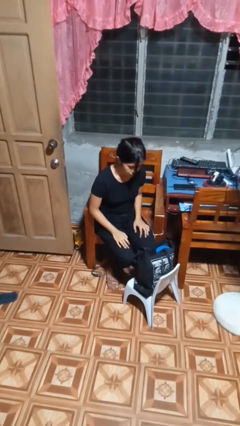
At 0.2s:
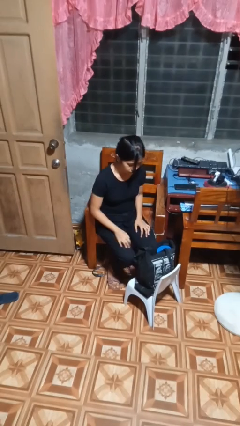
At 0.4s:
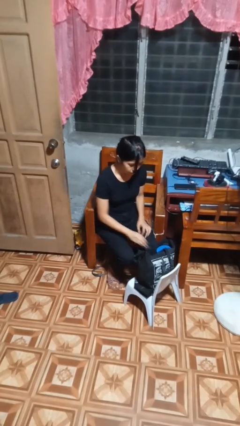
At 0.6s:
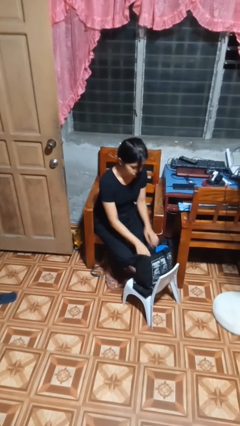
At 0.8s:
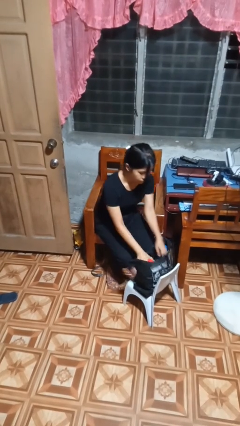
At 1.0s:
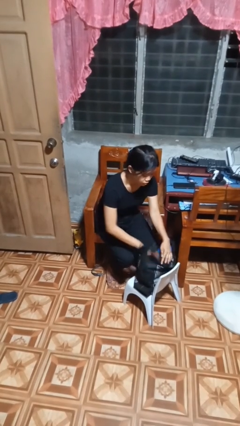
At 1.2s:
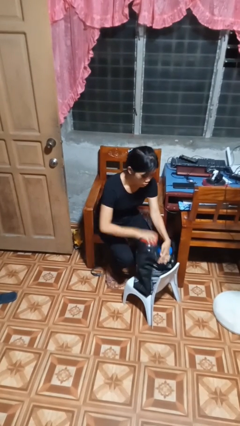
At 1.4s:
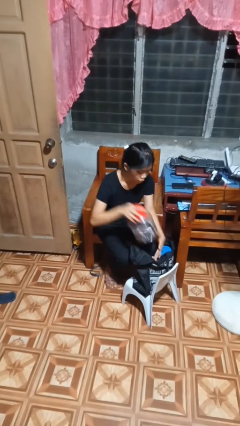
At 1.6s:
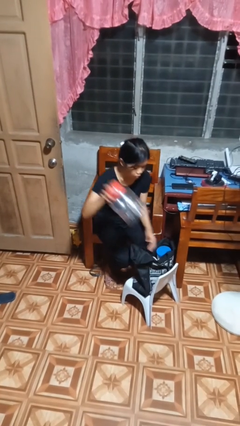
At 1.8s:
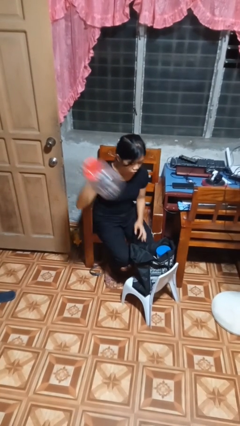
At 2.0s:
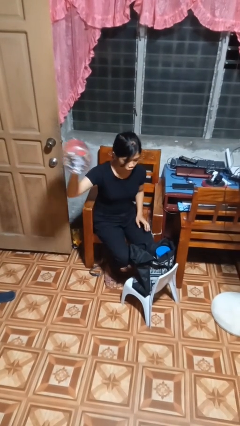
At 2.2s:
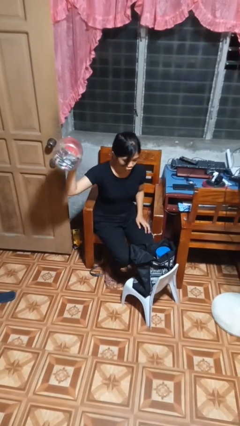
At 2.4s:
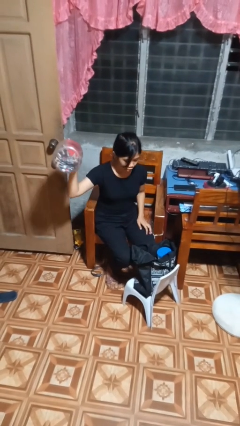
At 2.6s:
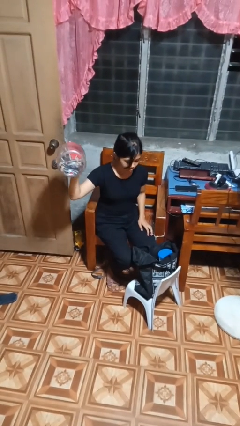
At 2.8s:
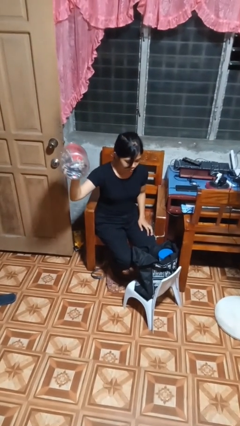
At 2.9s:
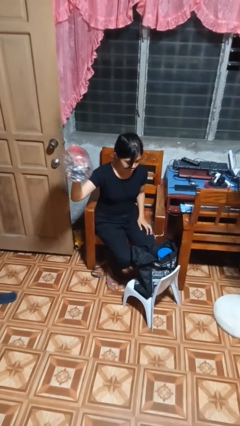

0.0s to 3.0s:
person searches in bag

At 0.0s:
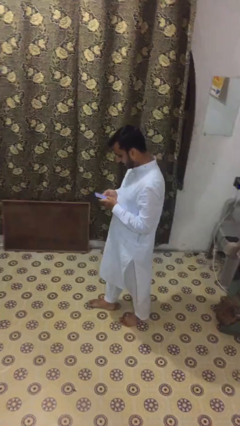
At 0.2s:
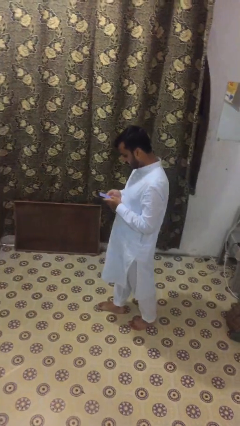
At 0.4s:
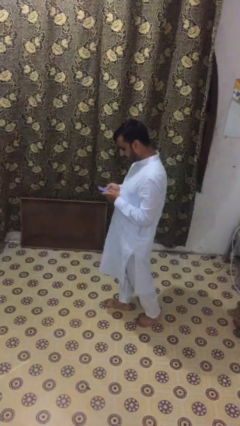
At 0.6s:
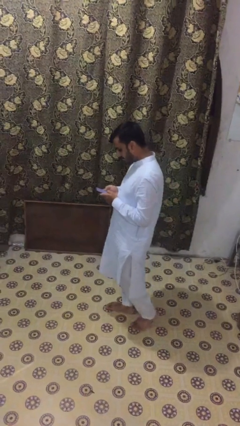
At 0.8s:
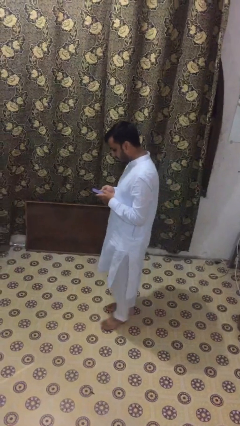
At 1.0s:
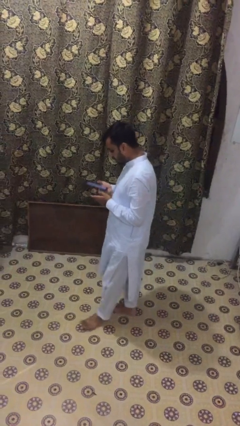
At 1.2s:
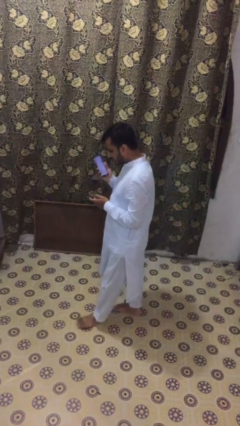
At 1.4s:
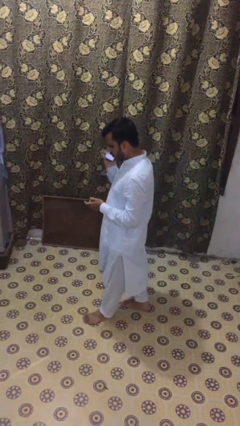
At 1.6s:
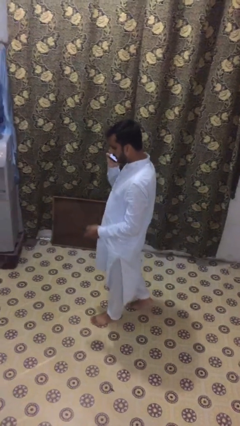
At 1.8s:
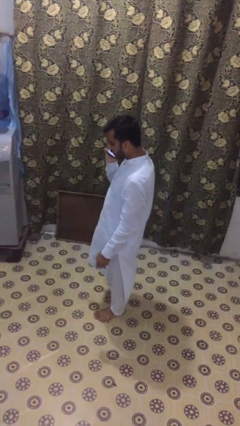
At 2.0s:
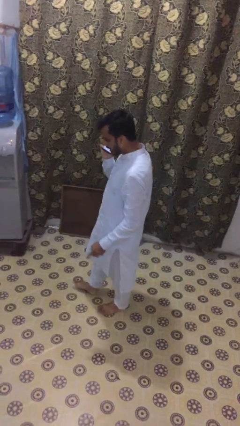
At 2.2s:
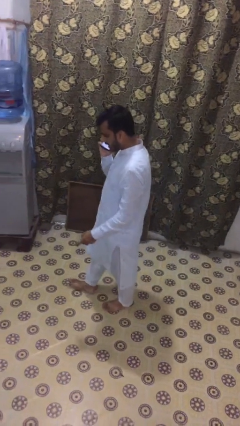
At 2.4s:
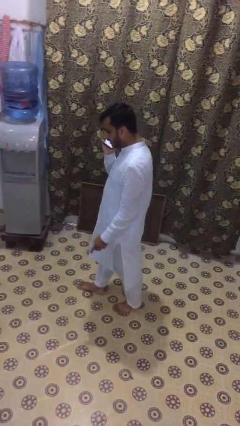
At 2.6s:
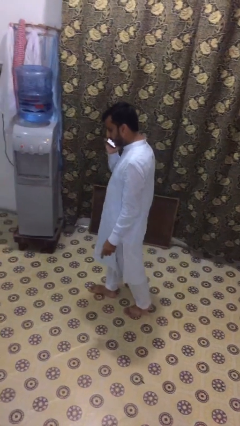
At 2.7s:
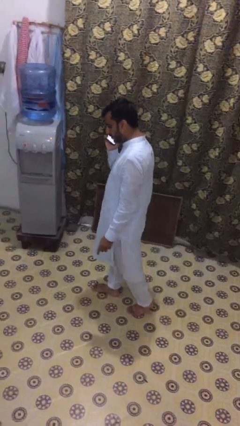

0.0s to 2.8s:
person talks on phone

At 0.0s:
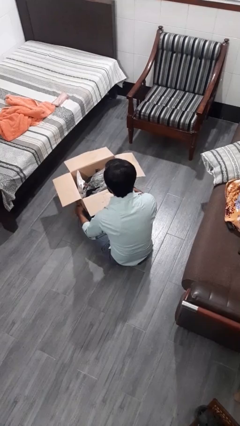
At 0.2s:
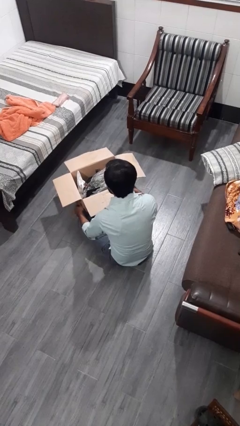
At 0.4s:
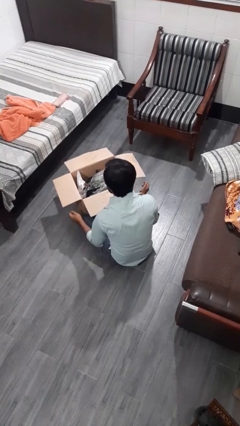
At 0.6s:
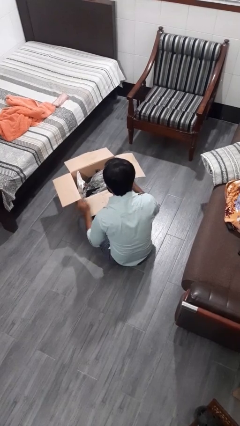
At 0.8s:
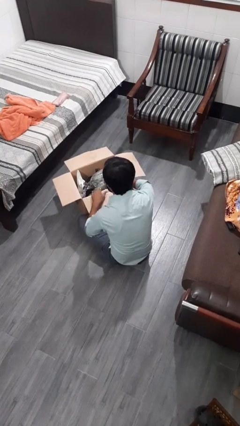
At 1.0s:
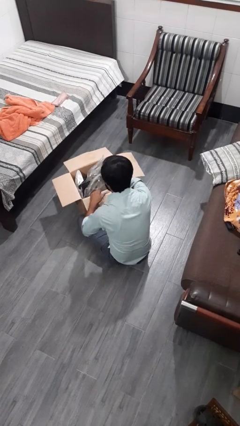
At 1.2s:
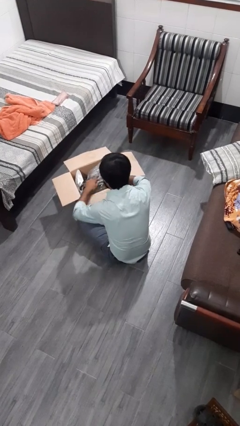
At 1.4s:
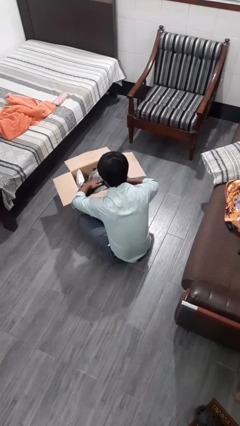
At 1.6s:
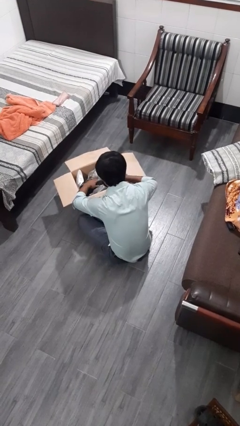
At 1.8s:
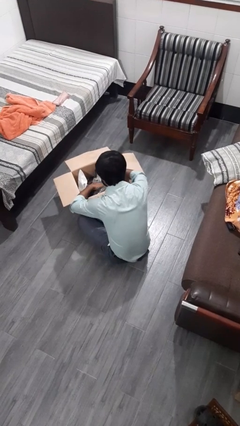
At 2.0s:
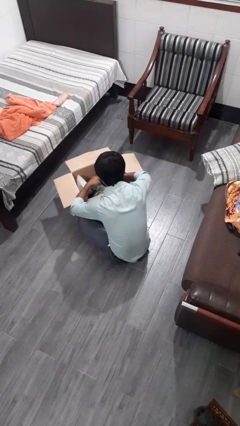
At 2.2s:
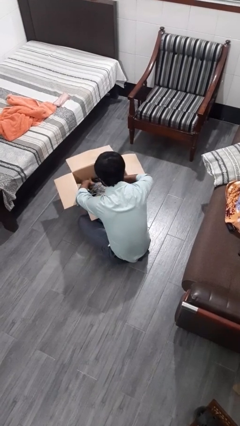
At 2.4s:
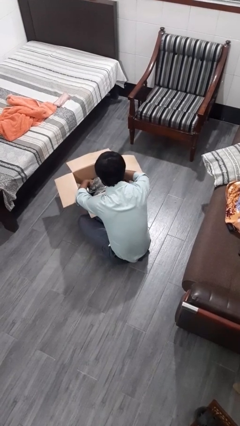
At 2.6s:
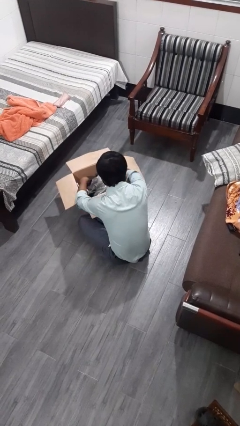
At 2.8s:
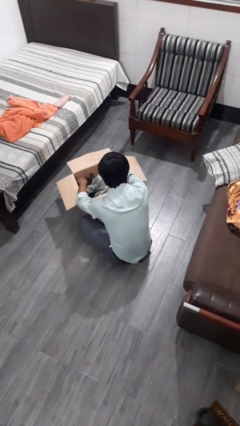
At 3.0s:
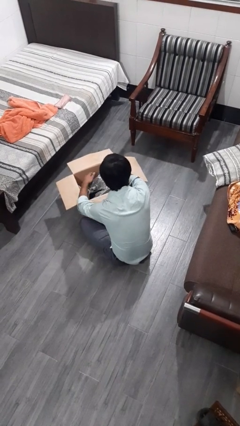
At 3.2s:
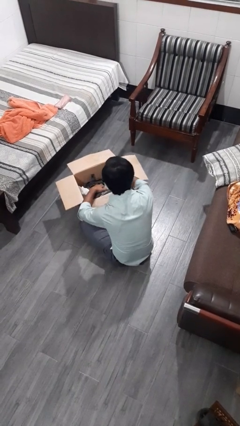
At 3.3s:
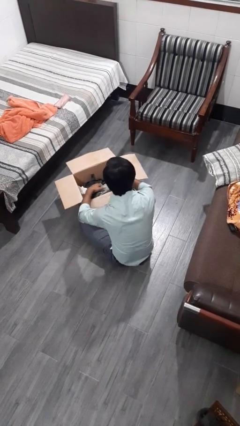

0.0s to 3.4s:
person searches in box

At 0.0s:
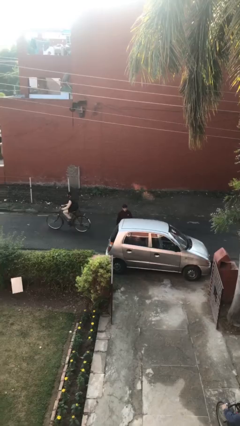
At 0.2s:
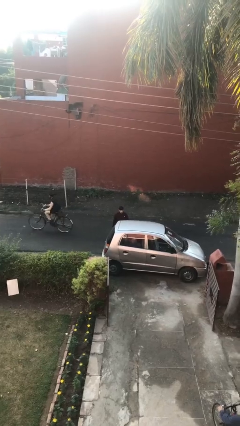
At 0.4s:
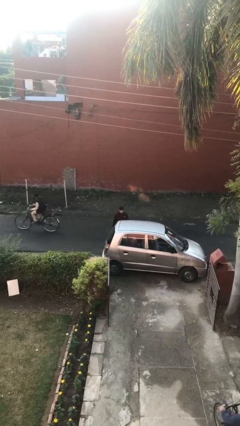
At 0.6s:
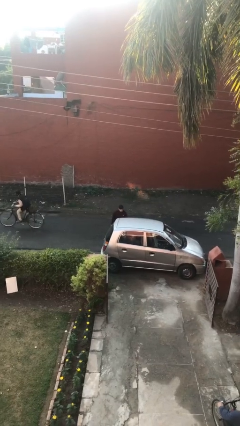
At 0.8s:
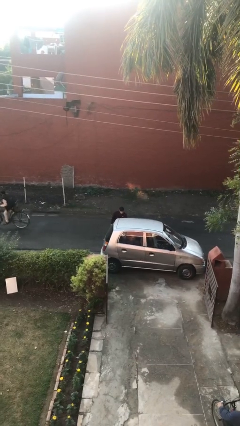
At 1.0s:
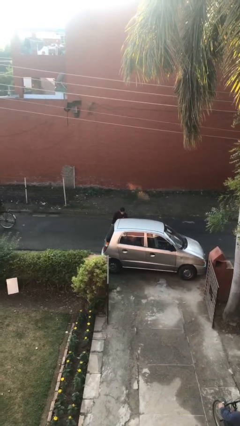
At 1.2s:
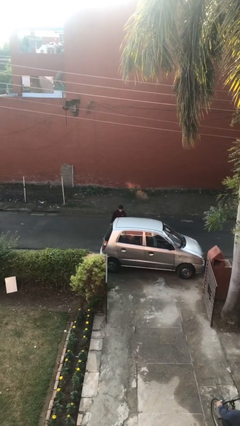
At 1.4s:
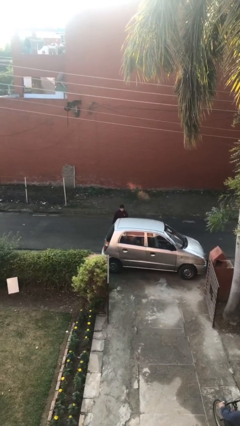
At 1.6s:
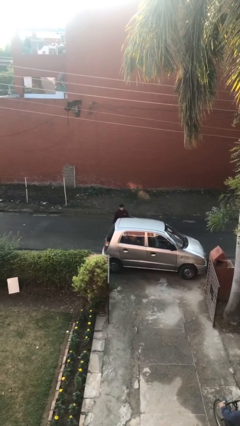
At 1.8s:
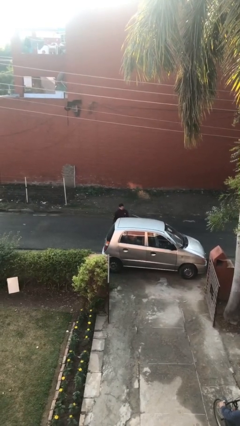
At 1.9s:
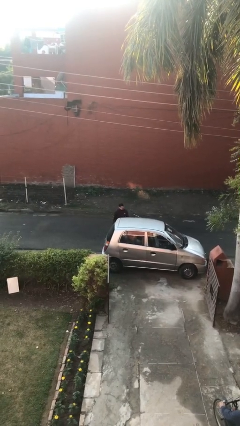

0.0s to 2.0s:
person opens car door

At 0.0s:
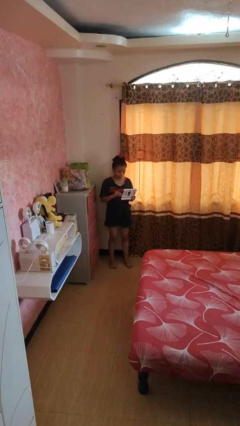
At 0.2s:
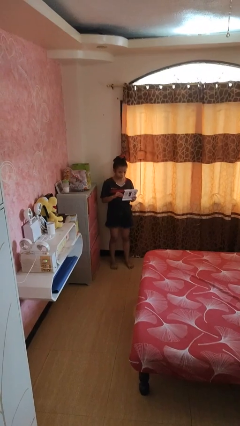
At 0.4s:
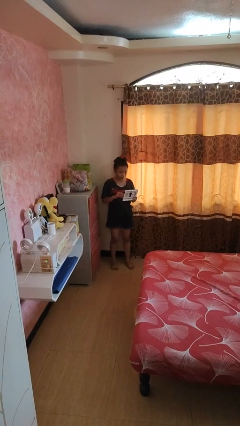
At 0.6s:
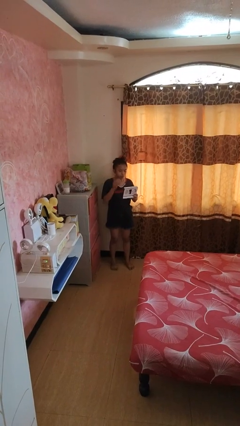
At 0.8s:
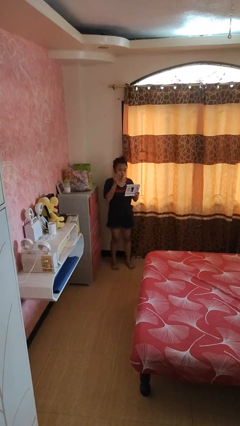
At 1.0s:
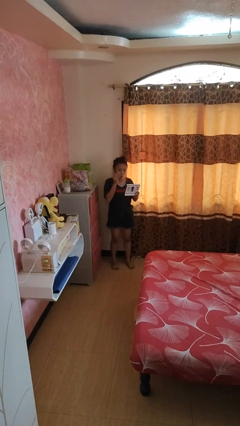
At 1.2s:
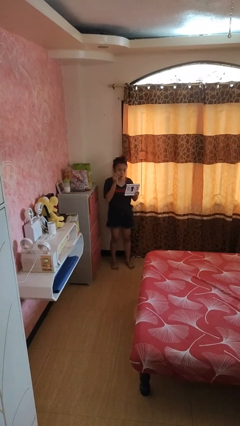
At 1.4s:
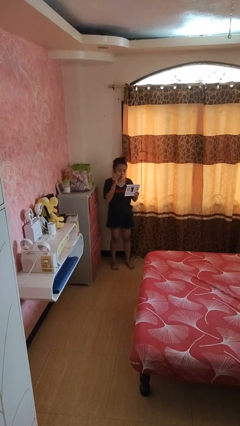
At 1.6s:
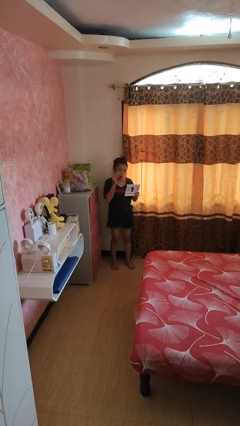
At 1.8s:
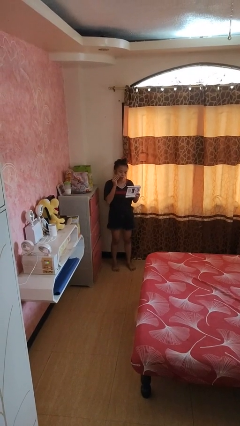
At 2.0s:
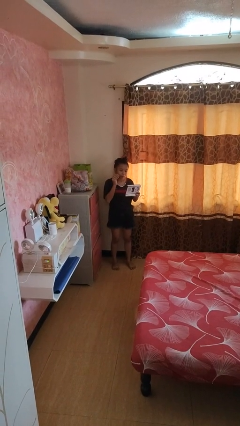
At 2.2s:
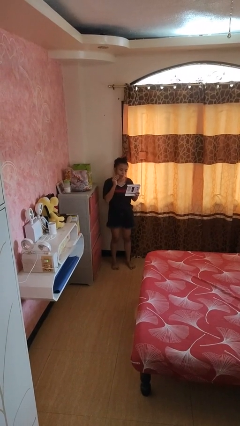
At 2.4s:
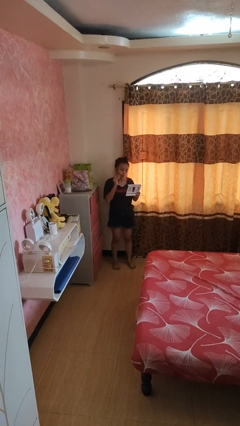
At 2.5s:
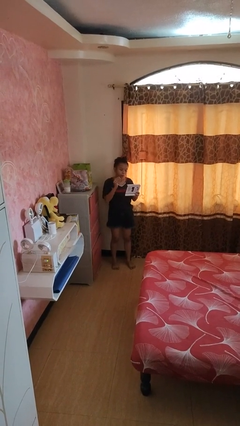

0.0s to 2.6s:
person applies foundation makeup

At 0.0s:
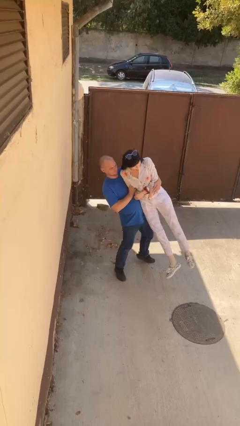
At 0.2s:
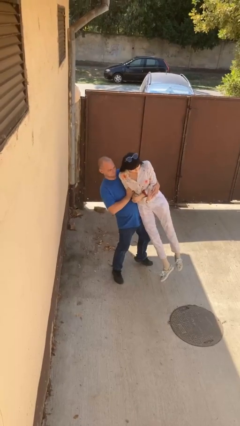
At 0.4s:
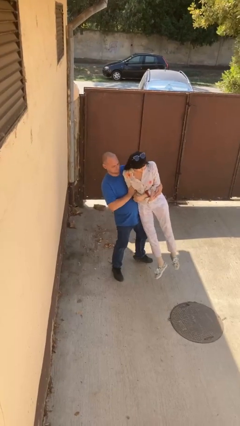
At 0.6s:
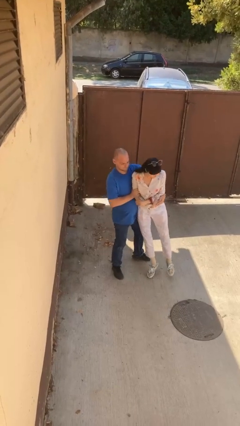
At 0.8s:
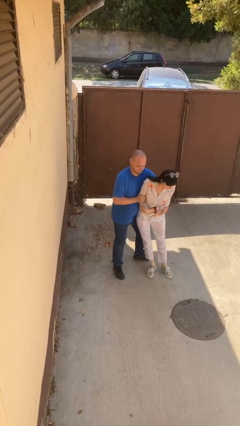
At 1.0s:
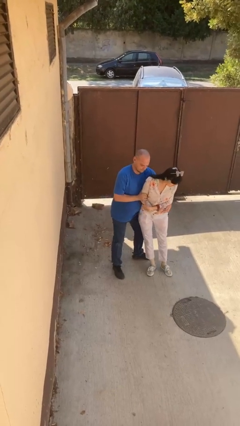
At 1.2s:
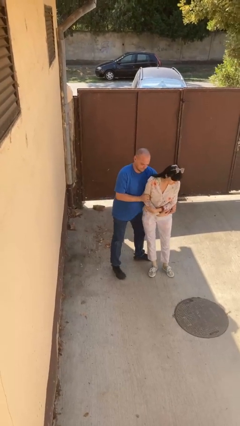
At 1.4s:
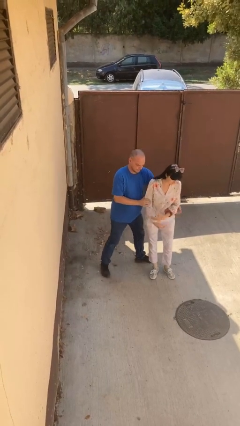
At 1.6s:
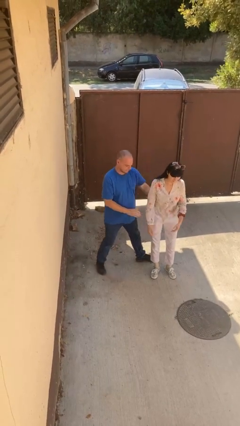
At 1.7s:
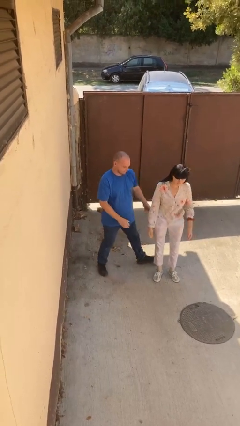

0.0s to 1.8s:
person puts down person

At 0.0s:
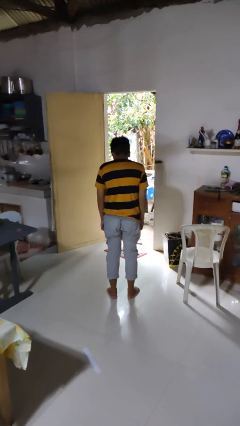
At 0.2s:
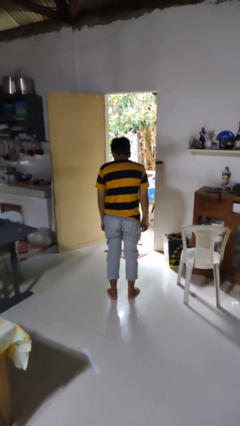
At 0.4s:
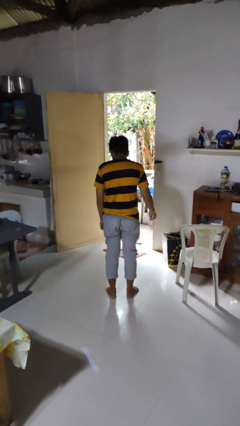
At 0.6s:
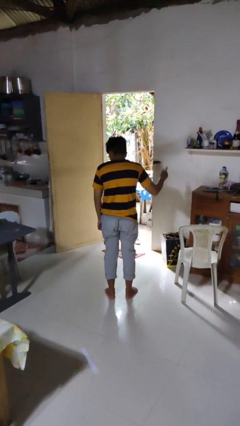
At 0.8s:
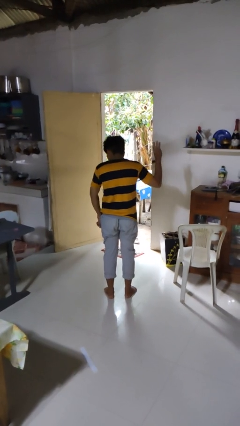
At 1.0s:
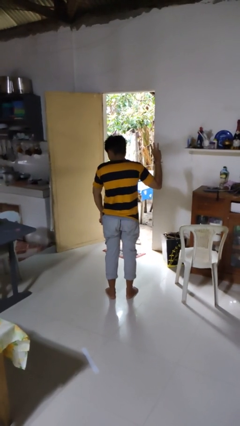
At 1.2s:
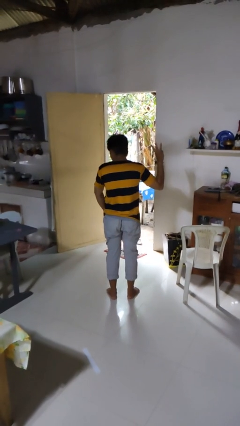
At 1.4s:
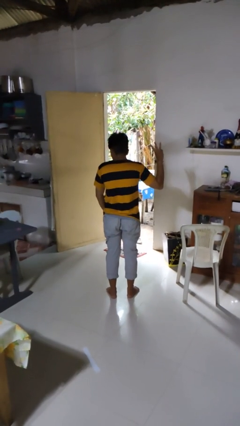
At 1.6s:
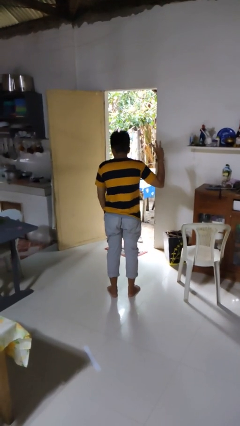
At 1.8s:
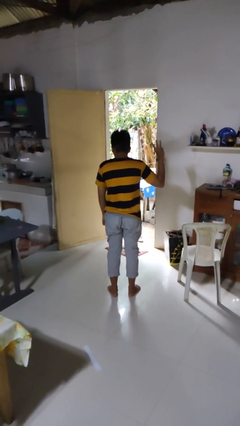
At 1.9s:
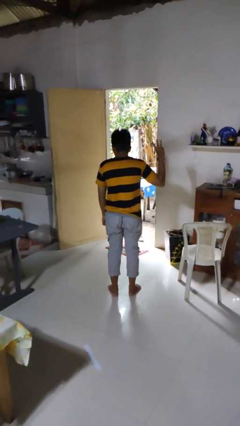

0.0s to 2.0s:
person gestures number three
